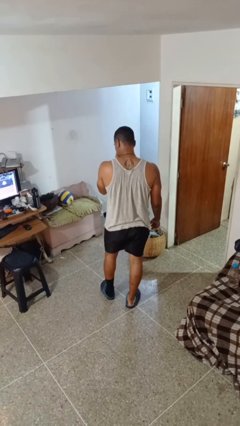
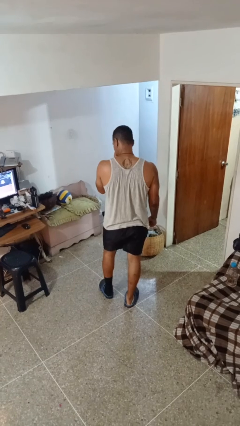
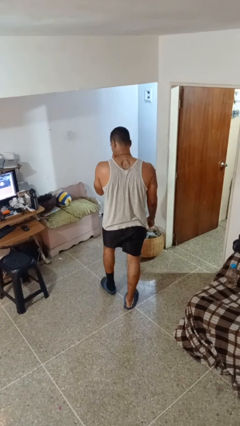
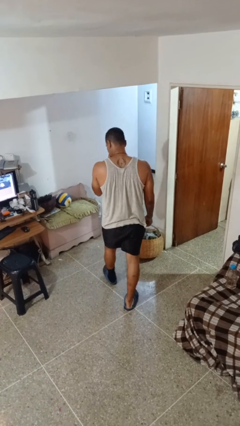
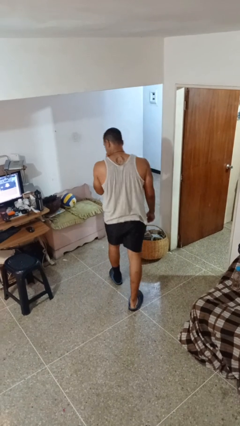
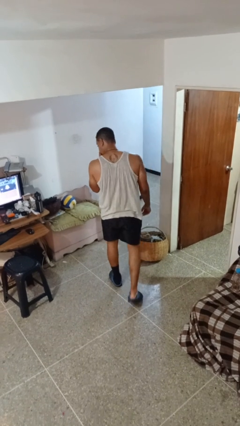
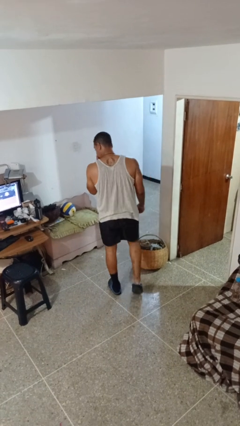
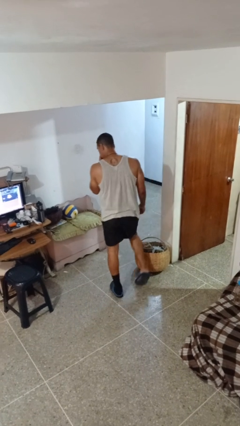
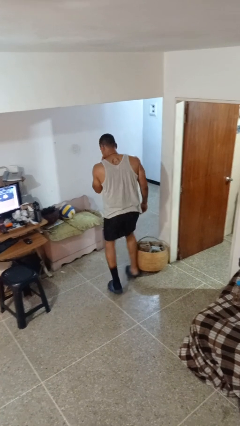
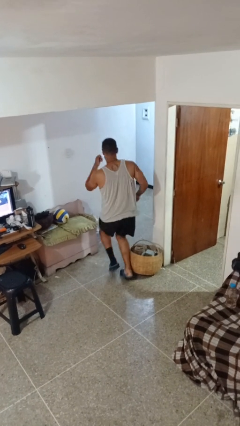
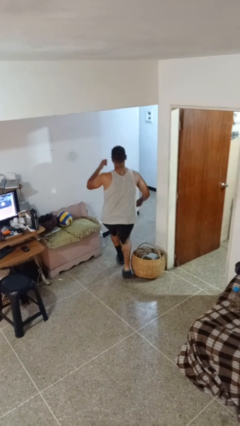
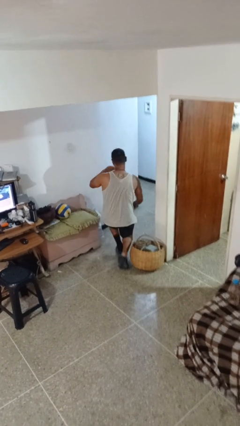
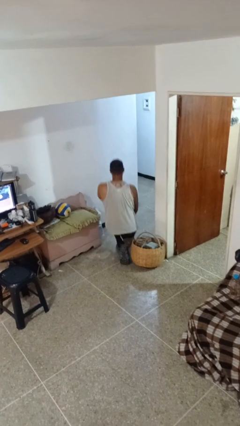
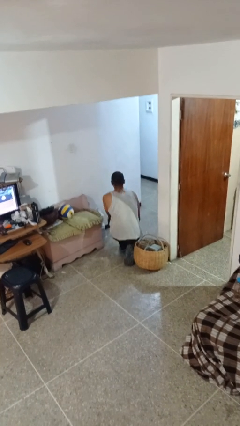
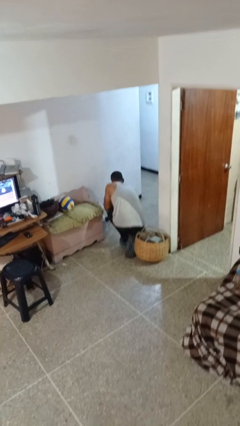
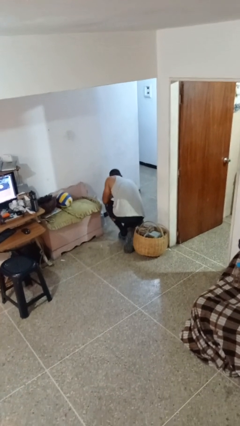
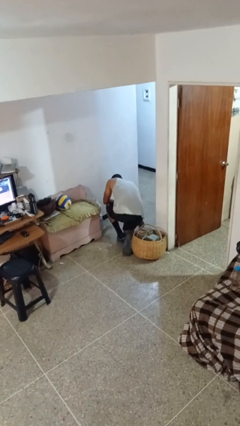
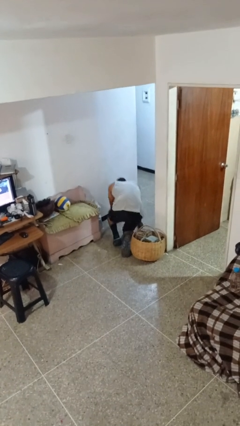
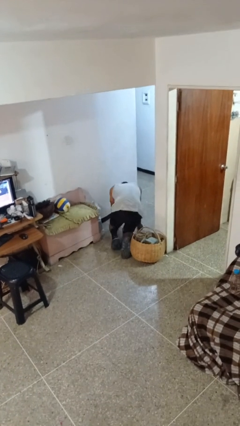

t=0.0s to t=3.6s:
person trips on object on floor

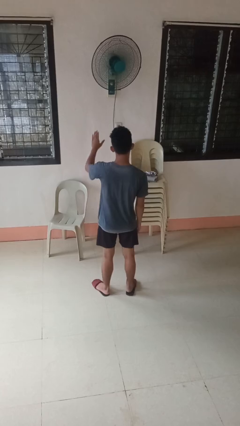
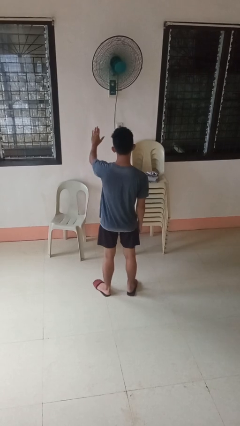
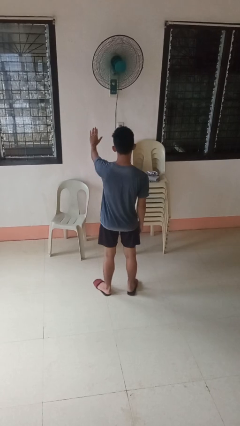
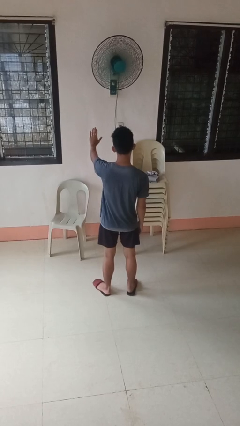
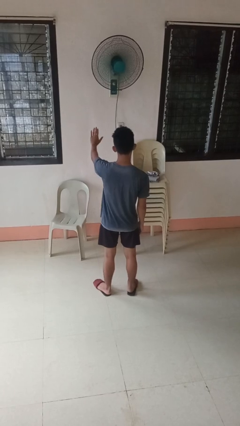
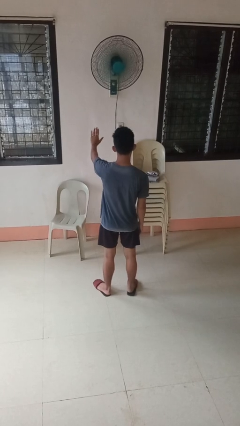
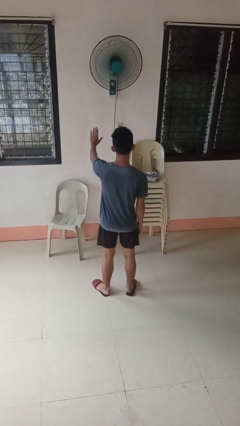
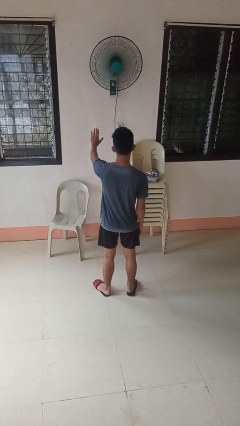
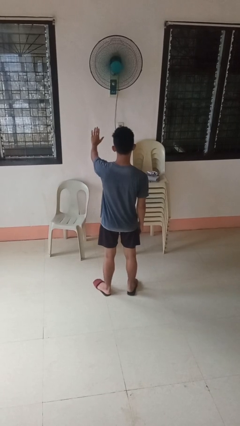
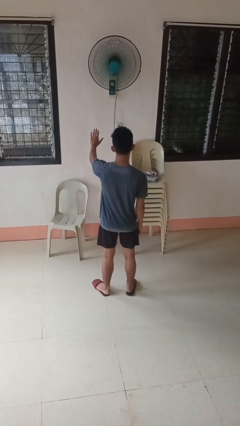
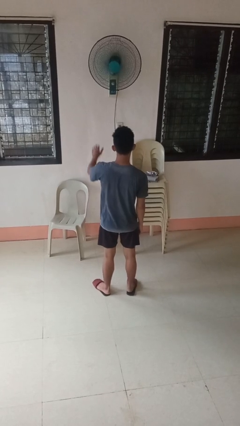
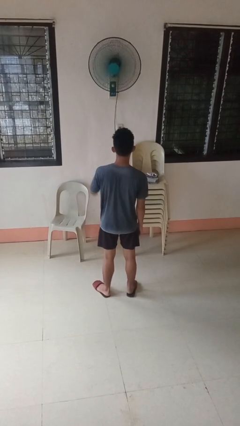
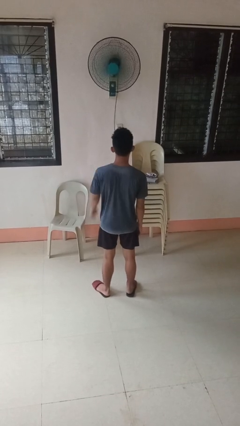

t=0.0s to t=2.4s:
person gestures stop

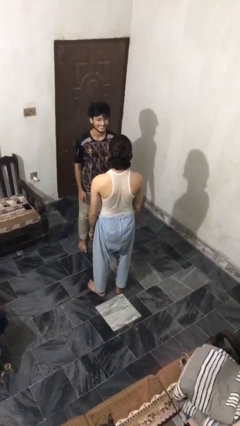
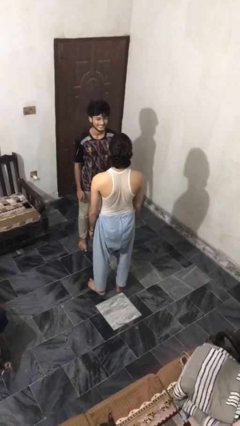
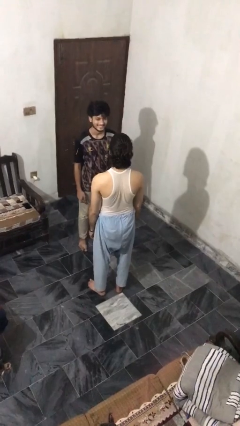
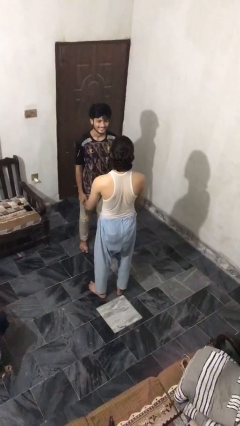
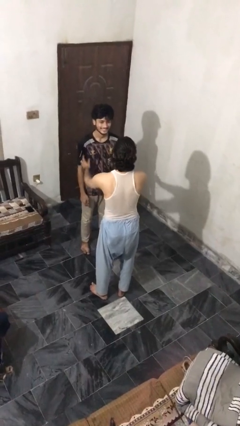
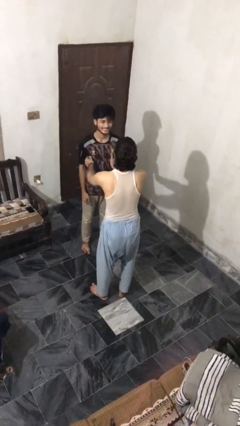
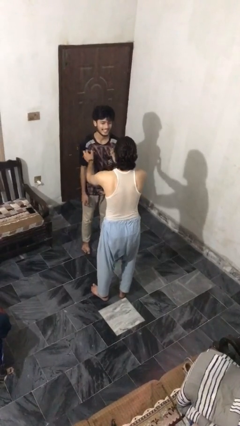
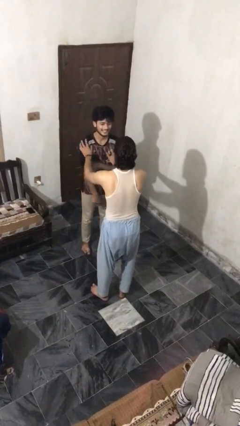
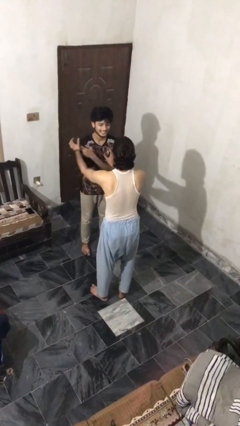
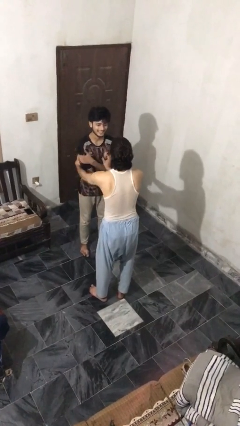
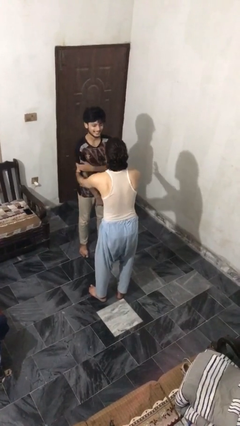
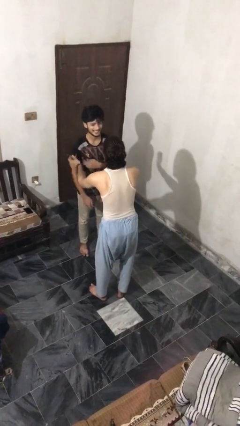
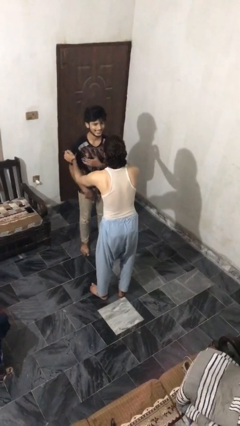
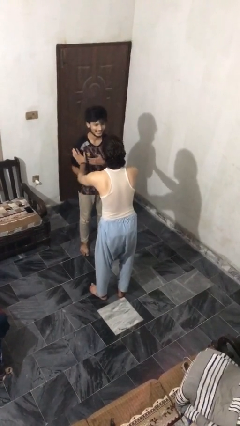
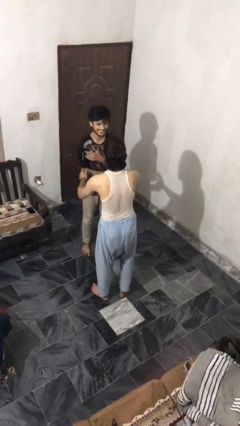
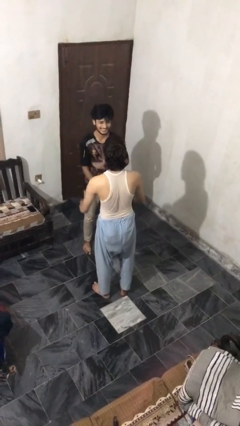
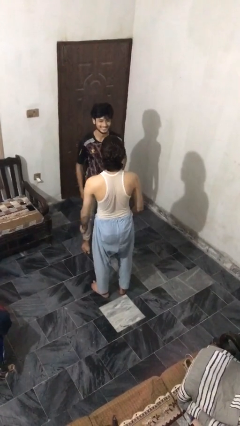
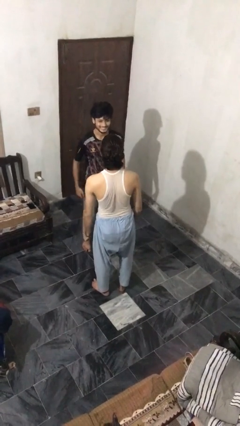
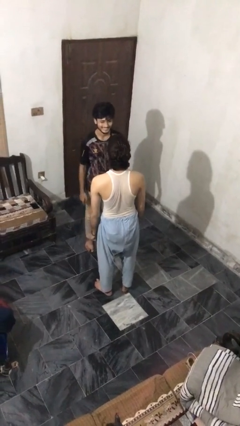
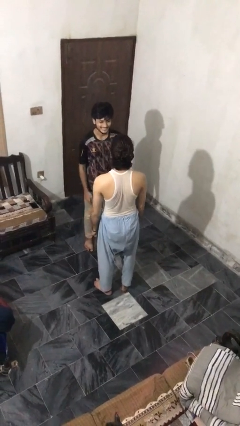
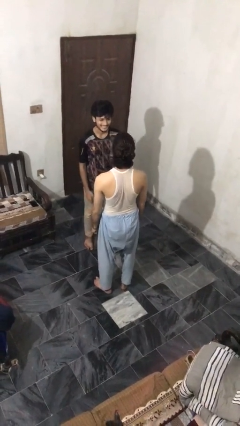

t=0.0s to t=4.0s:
person tickles person

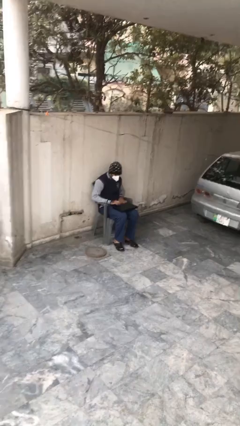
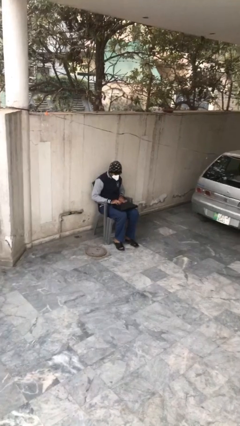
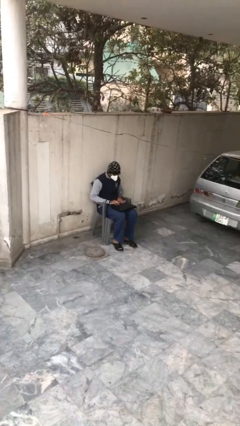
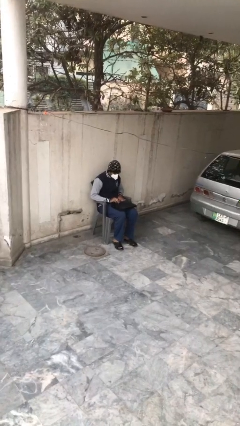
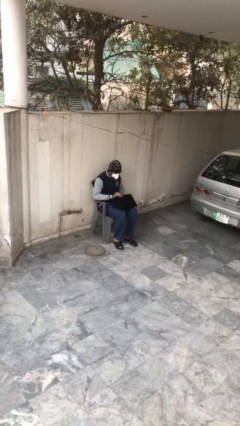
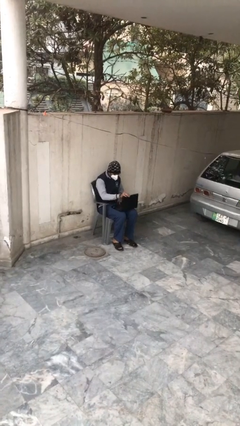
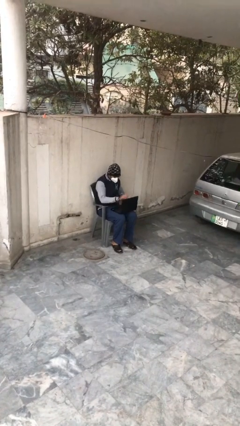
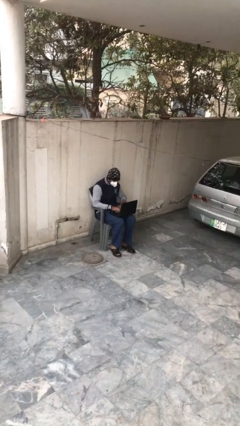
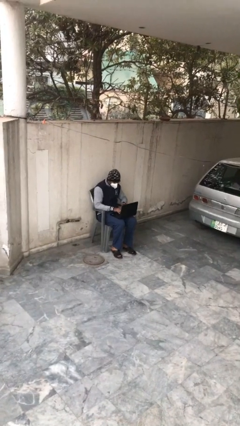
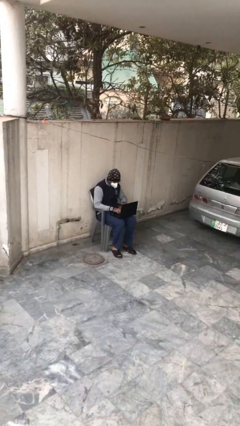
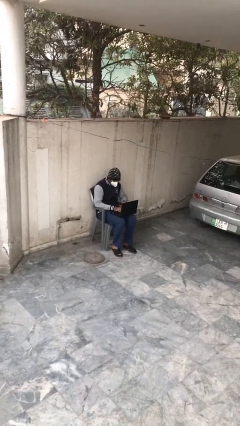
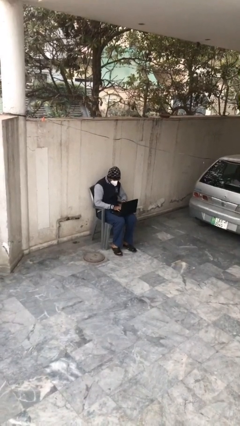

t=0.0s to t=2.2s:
person interacts with laptop

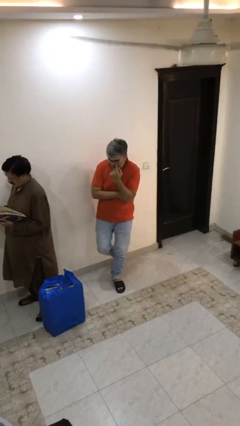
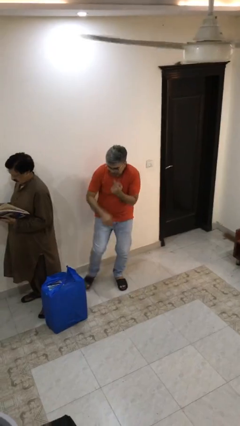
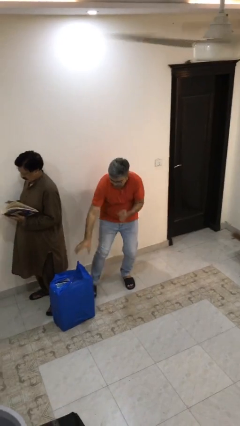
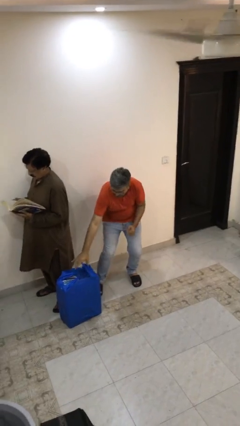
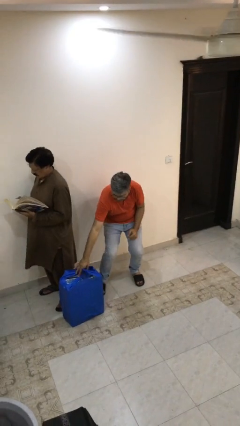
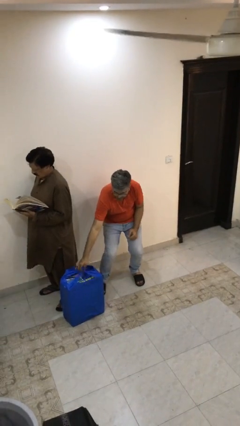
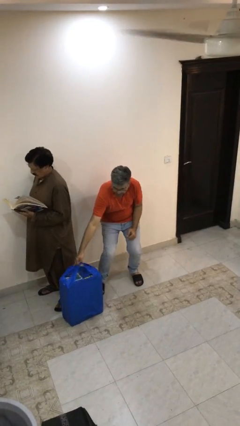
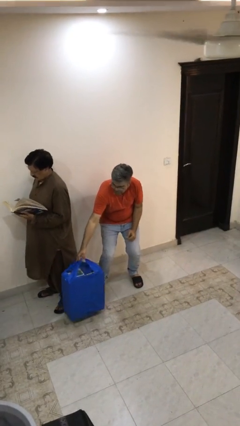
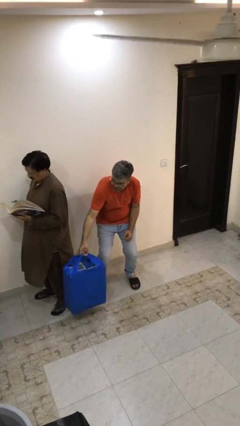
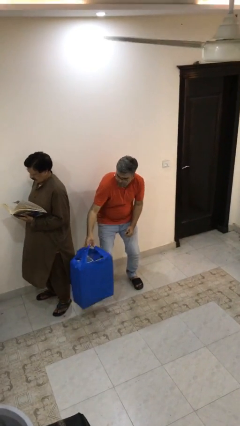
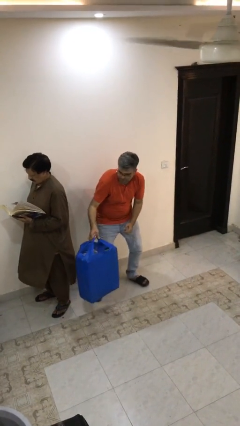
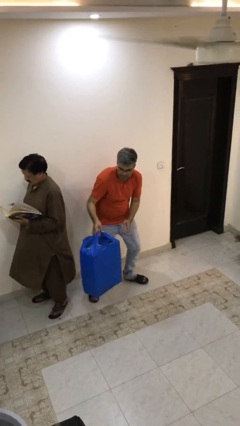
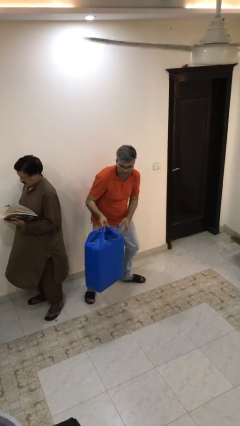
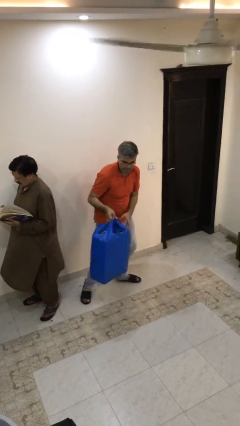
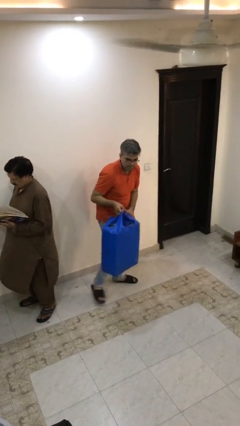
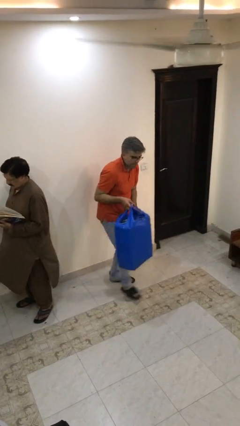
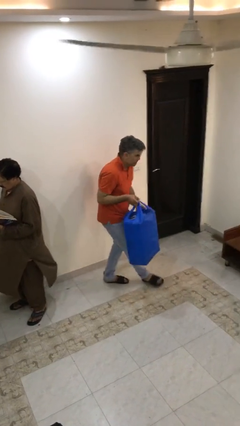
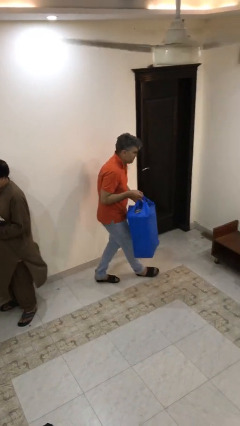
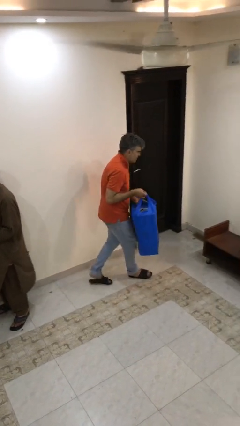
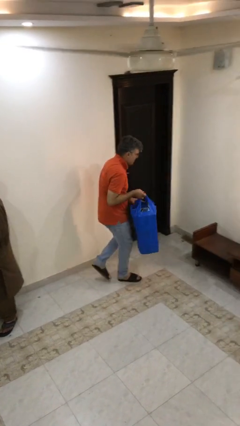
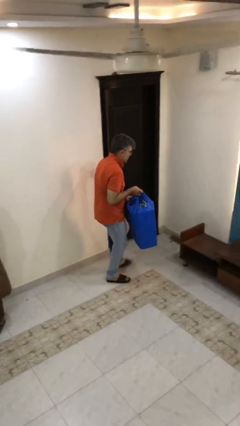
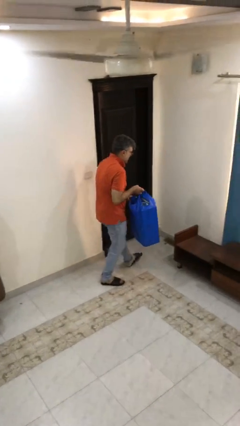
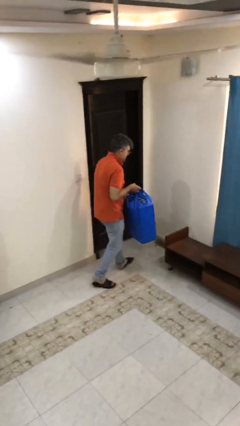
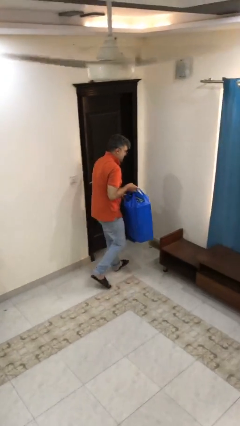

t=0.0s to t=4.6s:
person steals object from person

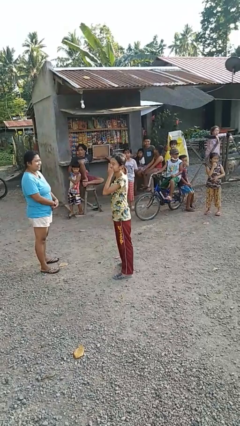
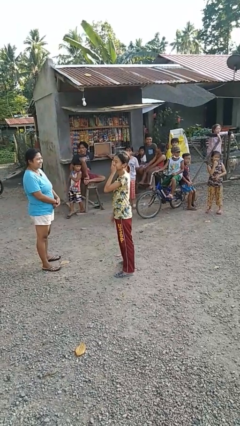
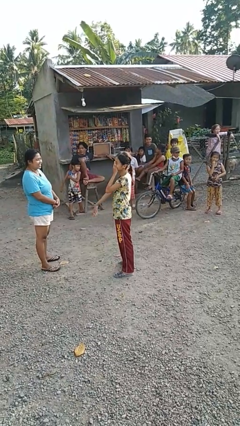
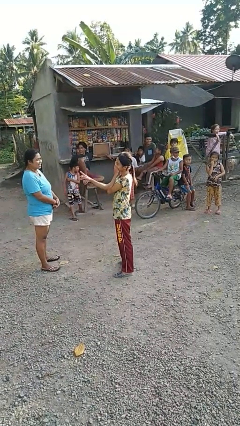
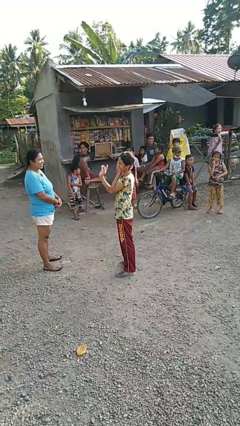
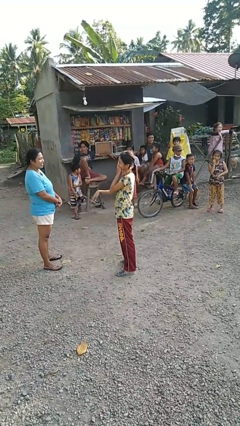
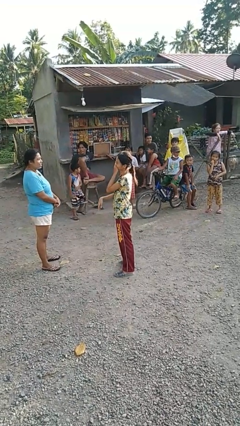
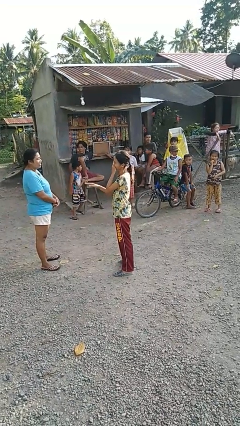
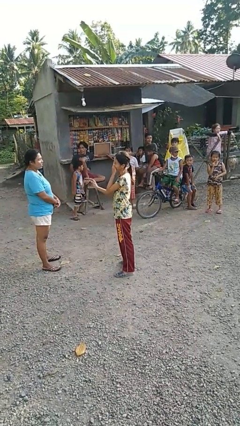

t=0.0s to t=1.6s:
person laughs with person
